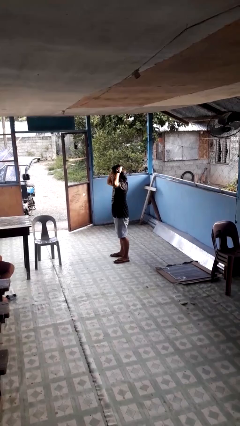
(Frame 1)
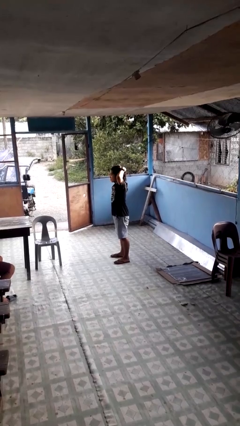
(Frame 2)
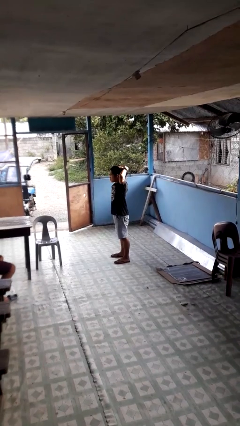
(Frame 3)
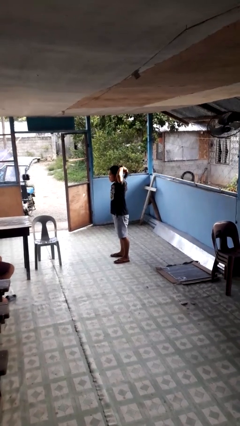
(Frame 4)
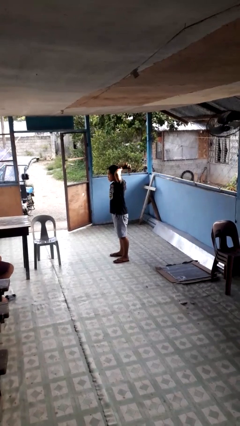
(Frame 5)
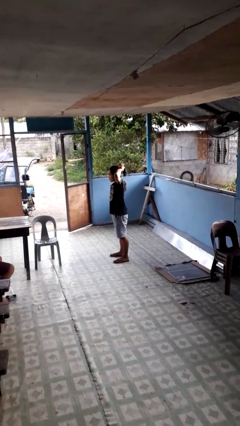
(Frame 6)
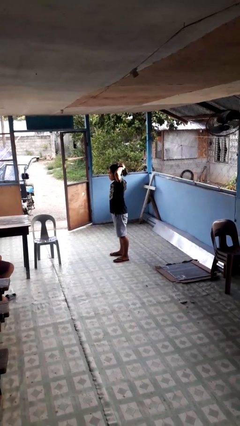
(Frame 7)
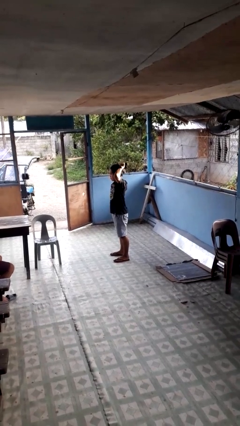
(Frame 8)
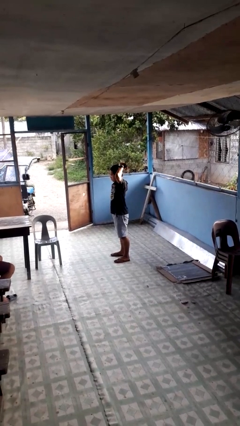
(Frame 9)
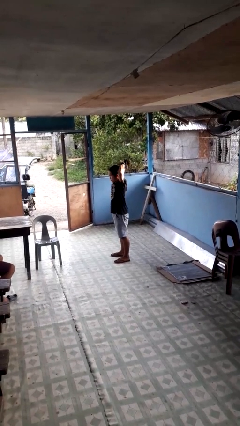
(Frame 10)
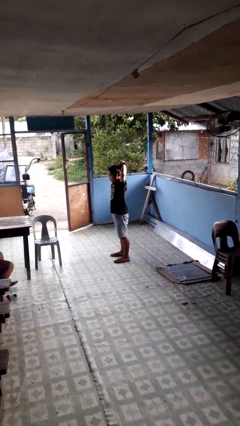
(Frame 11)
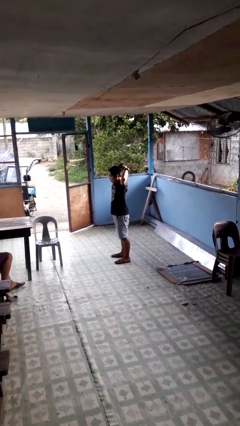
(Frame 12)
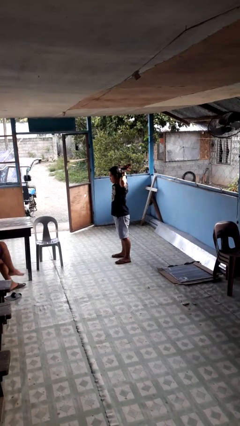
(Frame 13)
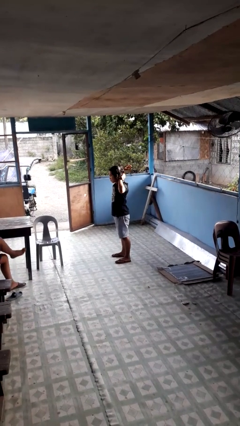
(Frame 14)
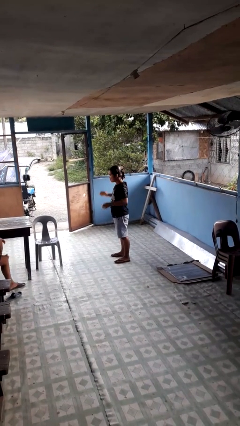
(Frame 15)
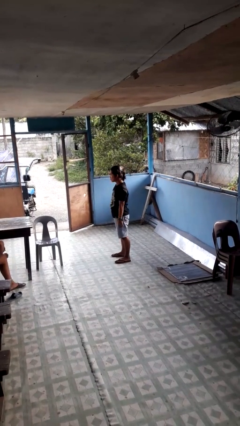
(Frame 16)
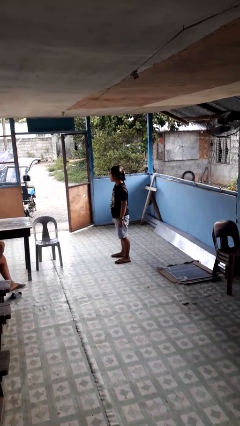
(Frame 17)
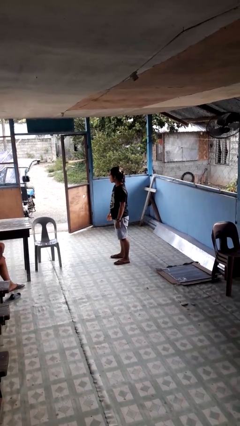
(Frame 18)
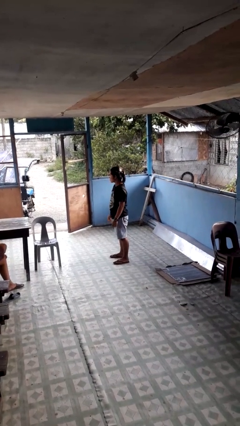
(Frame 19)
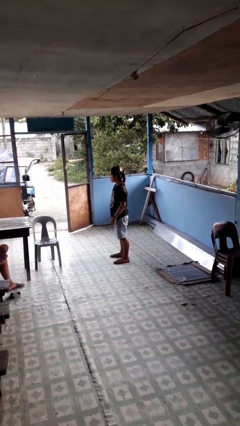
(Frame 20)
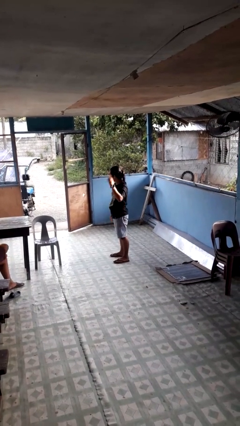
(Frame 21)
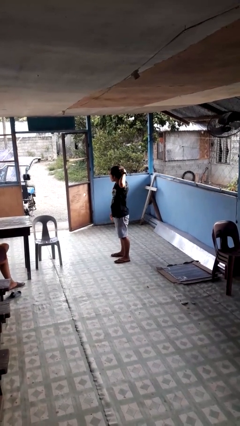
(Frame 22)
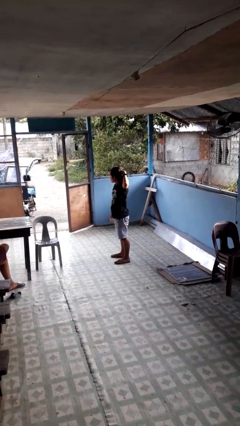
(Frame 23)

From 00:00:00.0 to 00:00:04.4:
person puts hair in ponytail

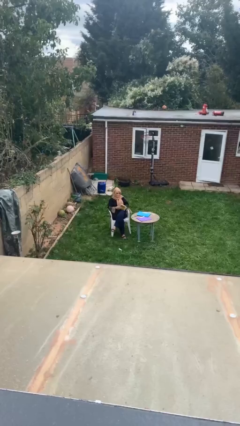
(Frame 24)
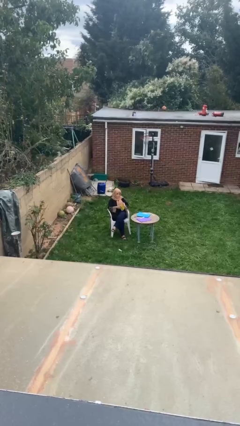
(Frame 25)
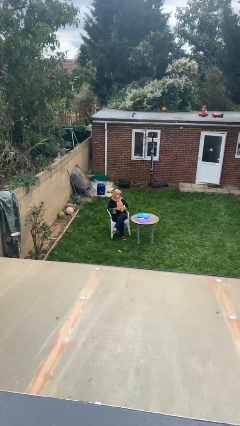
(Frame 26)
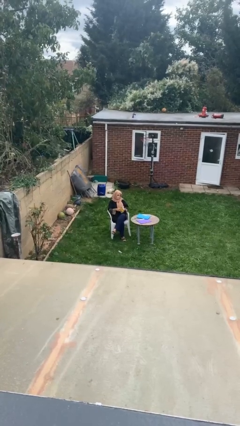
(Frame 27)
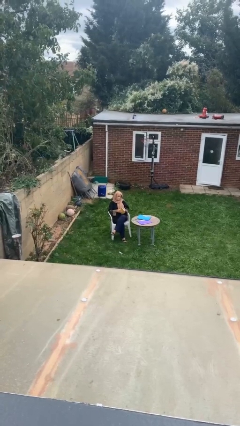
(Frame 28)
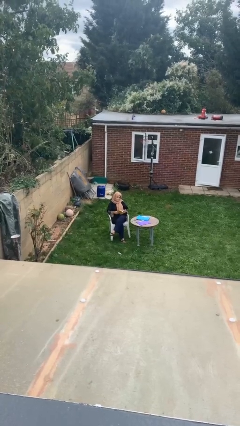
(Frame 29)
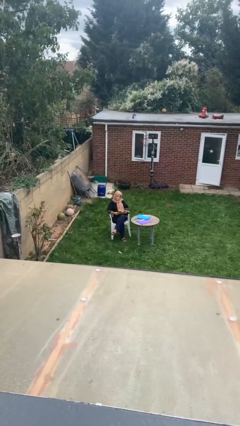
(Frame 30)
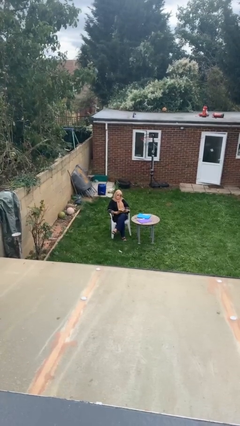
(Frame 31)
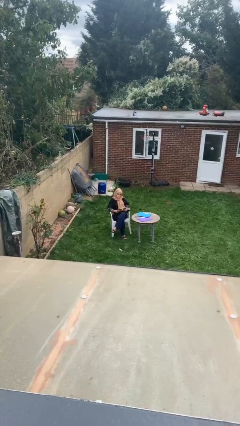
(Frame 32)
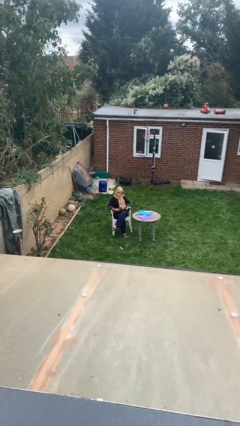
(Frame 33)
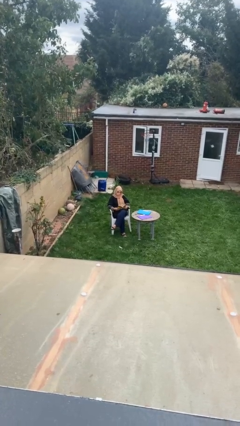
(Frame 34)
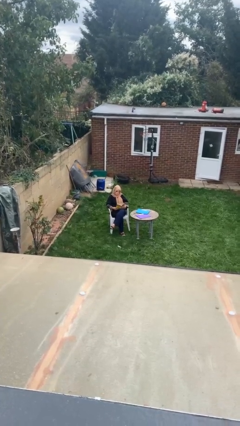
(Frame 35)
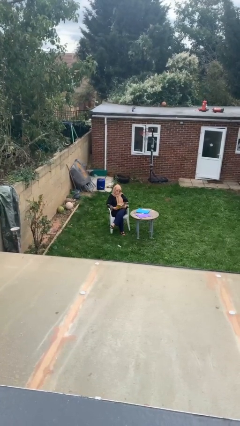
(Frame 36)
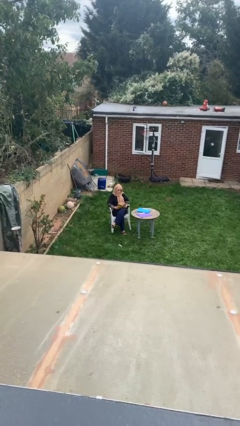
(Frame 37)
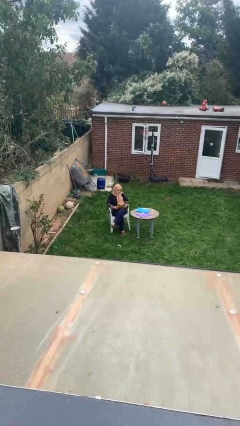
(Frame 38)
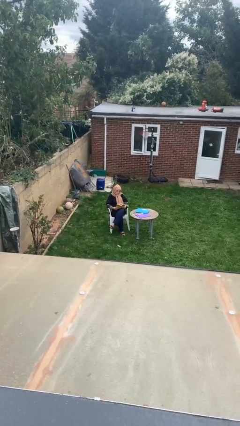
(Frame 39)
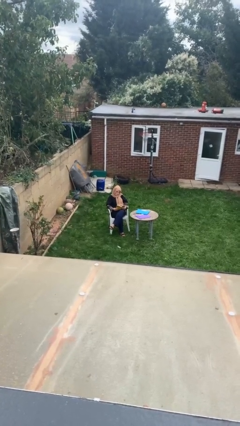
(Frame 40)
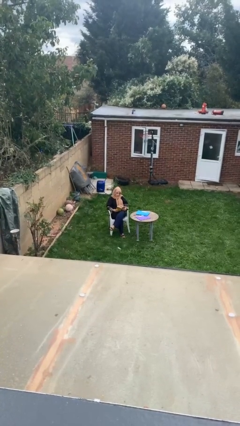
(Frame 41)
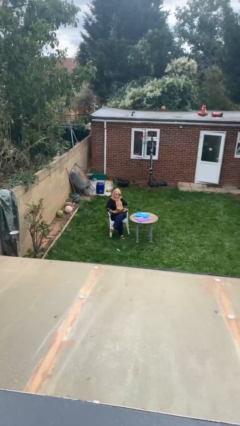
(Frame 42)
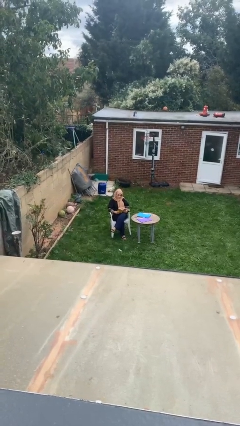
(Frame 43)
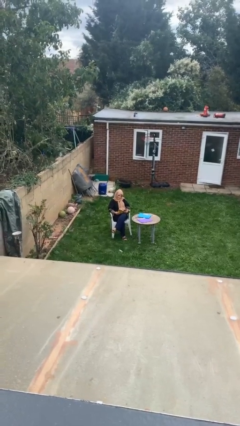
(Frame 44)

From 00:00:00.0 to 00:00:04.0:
person reads document

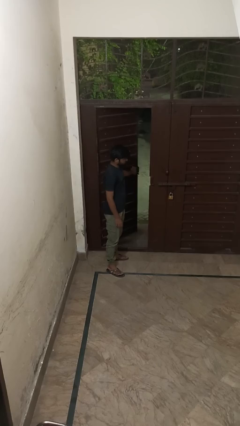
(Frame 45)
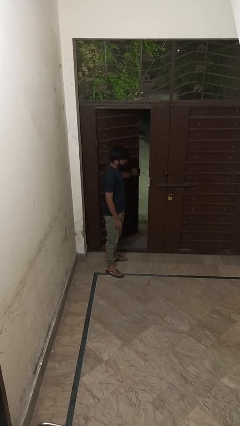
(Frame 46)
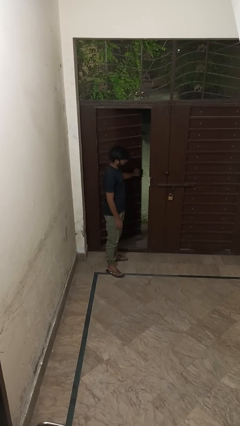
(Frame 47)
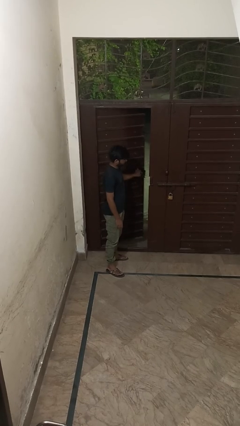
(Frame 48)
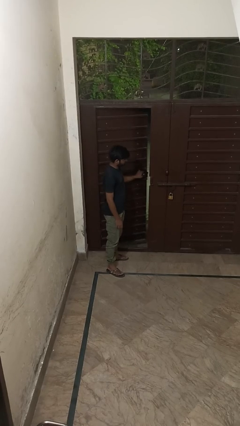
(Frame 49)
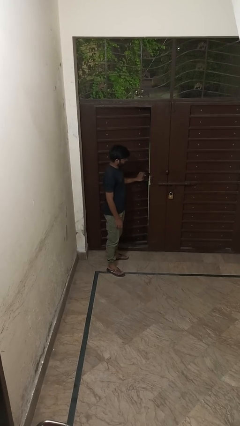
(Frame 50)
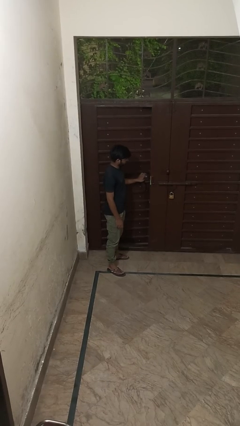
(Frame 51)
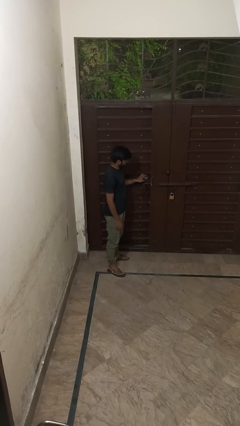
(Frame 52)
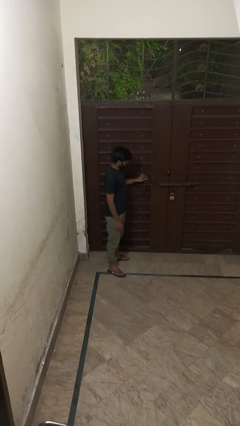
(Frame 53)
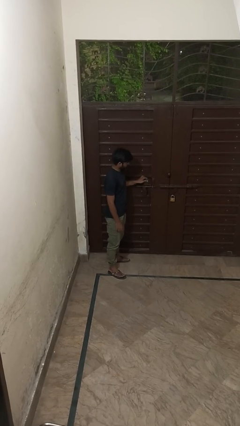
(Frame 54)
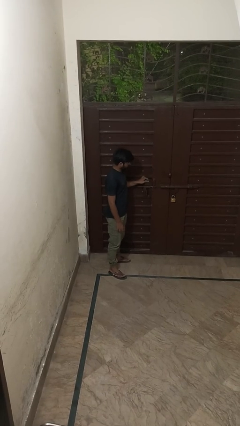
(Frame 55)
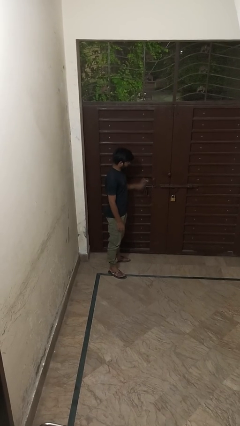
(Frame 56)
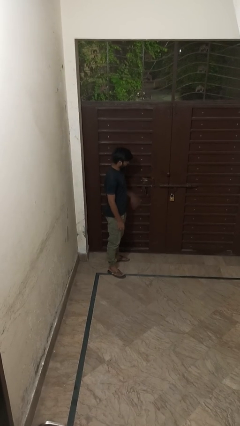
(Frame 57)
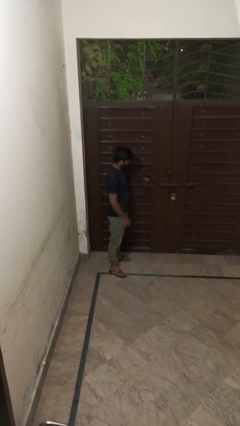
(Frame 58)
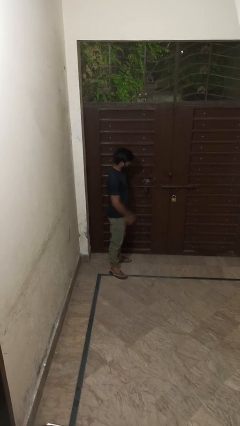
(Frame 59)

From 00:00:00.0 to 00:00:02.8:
person closes facility door

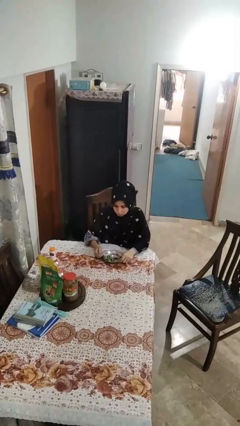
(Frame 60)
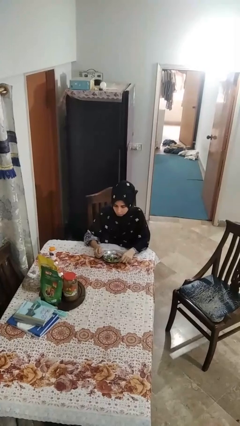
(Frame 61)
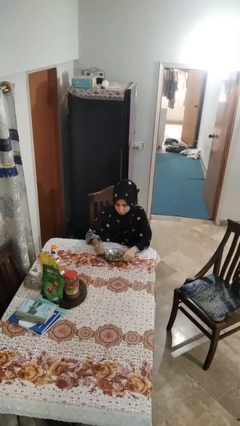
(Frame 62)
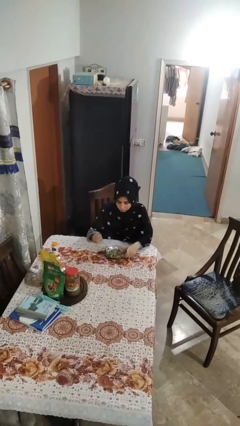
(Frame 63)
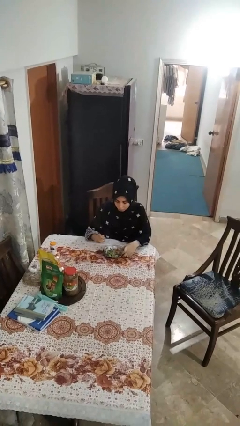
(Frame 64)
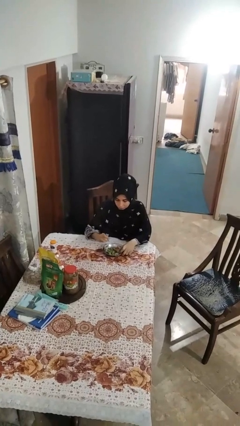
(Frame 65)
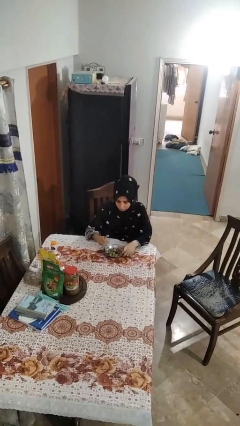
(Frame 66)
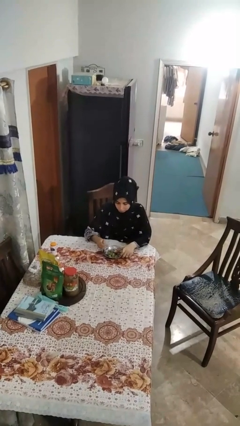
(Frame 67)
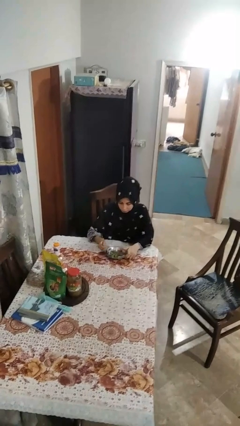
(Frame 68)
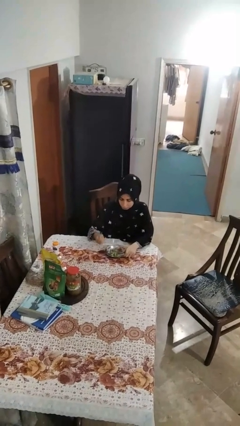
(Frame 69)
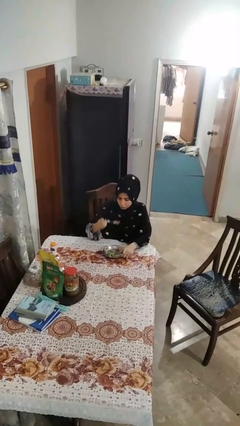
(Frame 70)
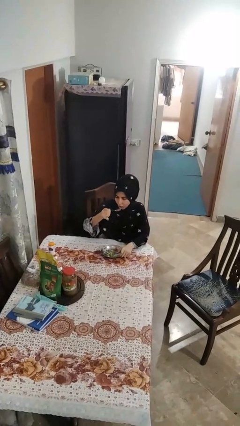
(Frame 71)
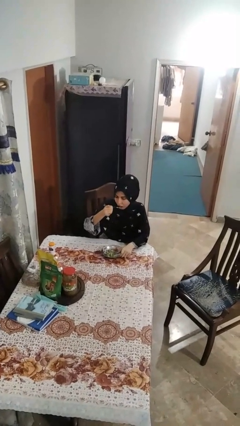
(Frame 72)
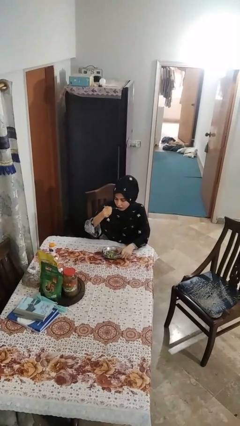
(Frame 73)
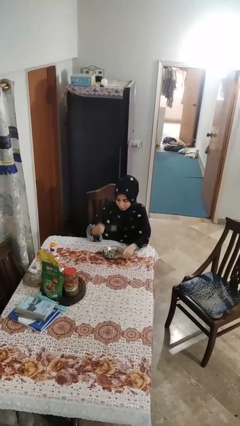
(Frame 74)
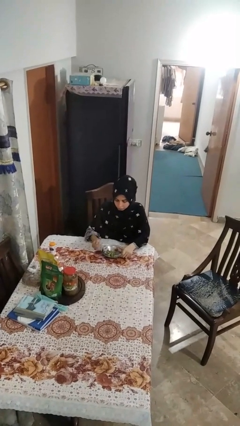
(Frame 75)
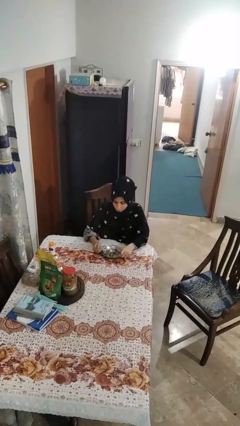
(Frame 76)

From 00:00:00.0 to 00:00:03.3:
person eats with utensil

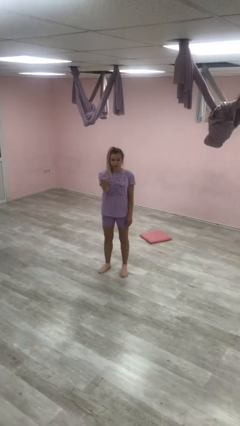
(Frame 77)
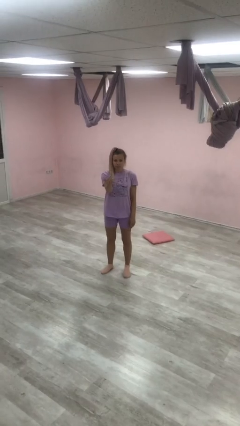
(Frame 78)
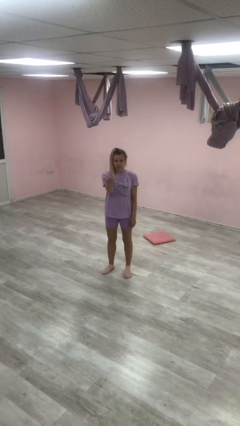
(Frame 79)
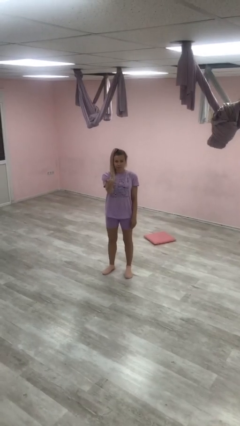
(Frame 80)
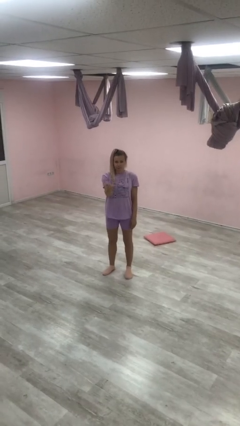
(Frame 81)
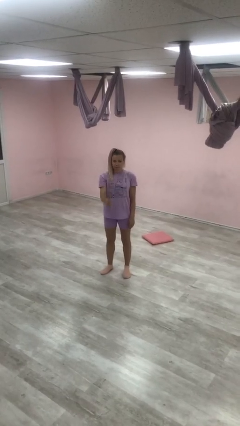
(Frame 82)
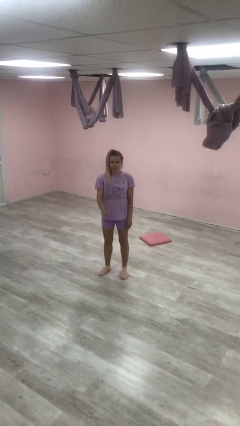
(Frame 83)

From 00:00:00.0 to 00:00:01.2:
person gestures come here

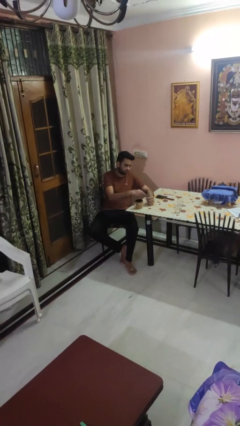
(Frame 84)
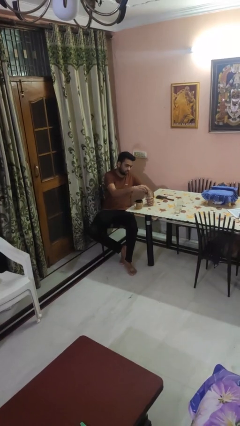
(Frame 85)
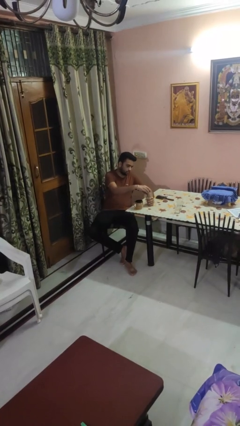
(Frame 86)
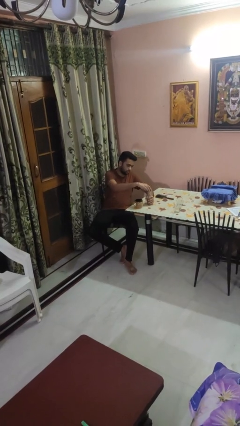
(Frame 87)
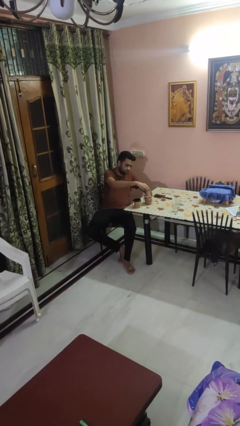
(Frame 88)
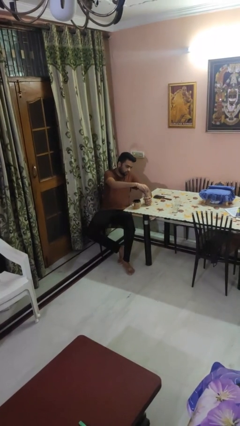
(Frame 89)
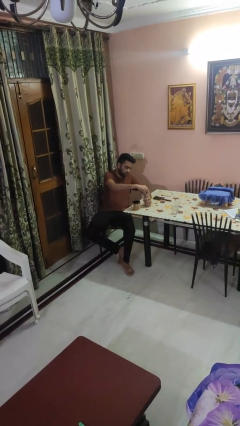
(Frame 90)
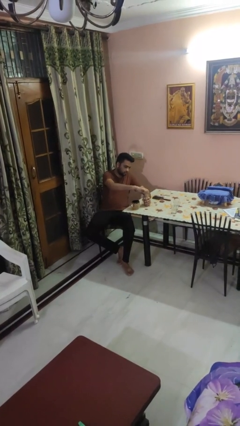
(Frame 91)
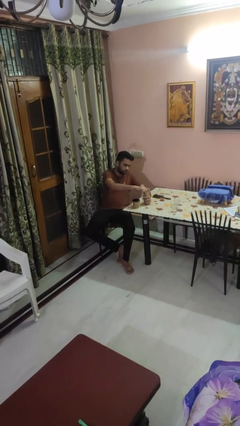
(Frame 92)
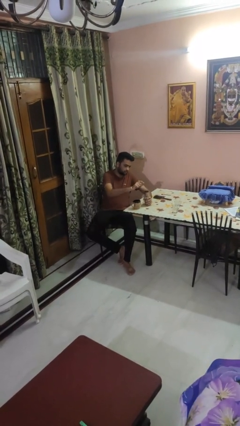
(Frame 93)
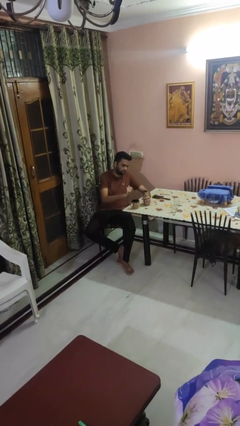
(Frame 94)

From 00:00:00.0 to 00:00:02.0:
person screws lid to bottle
